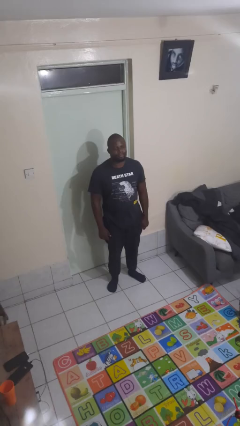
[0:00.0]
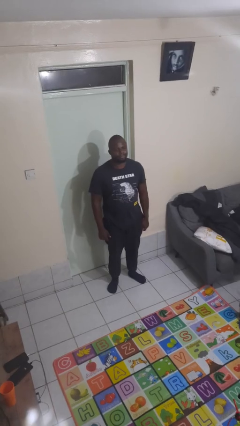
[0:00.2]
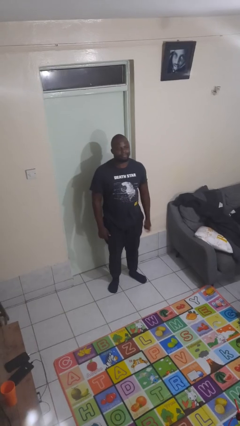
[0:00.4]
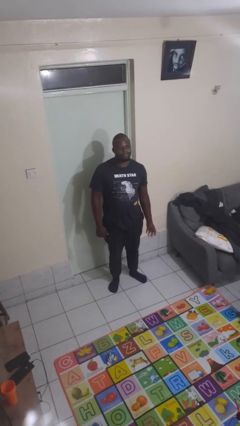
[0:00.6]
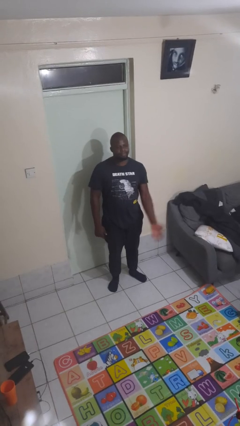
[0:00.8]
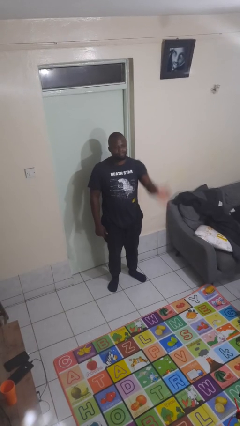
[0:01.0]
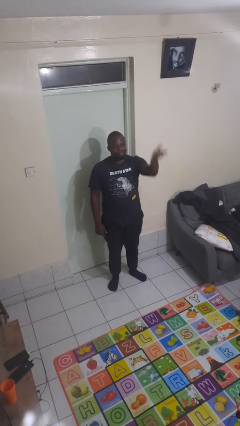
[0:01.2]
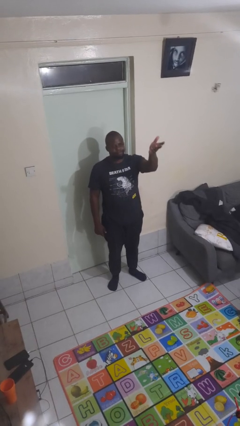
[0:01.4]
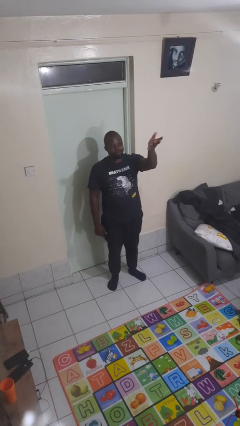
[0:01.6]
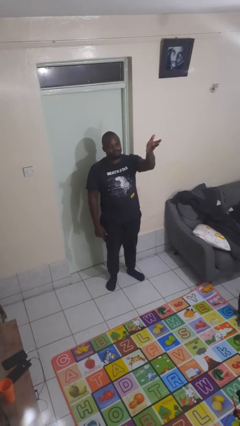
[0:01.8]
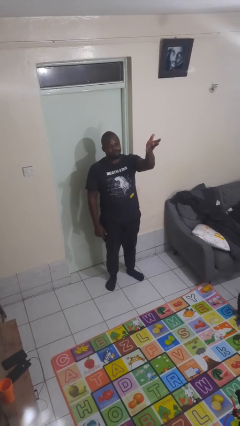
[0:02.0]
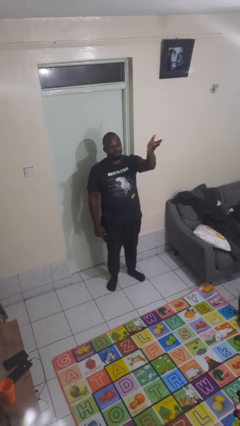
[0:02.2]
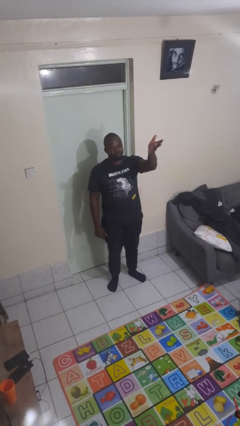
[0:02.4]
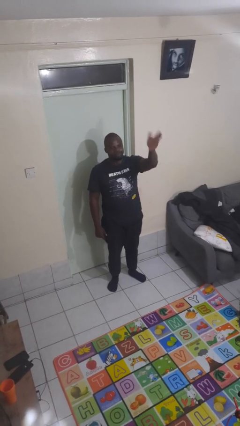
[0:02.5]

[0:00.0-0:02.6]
person gestures swipe up

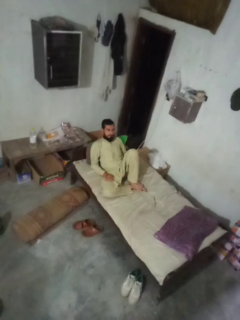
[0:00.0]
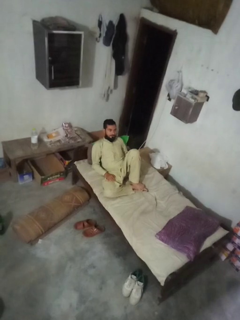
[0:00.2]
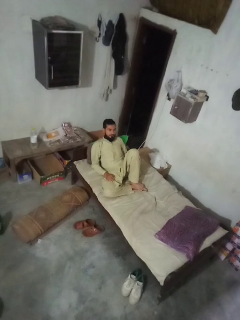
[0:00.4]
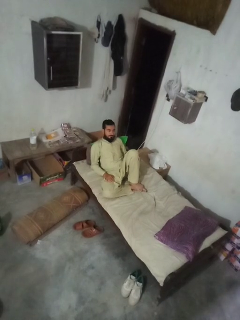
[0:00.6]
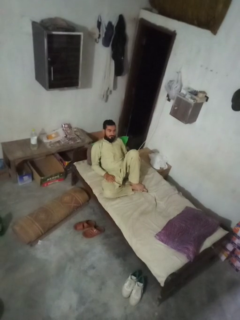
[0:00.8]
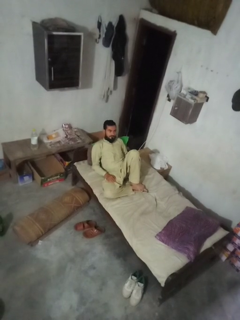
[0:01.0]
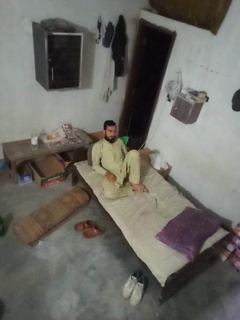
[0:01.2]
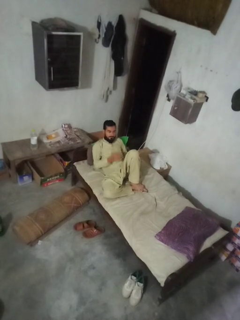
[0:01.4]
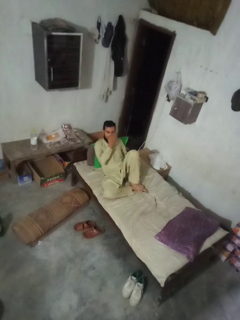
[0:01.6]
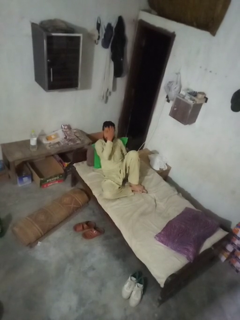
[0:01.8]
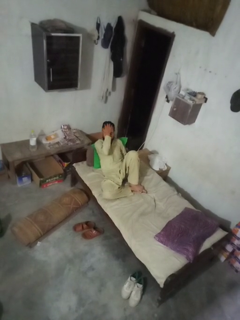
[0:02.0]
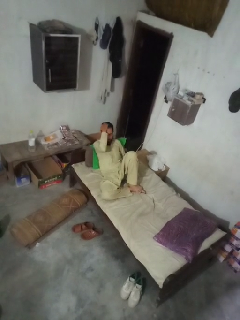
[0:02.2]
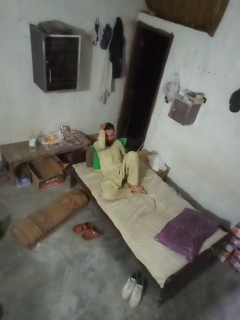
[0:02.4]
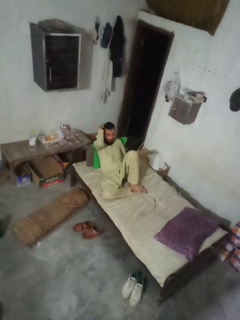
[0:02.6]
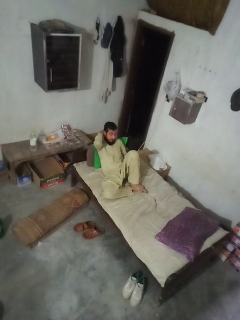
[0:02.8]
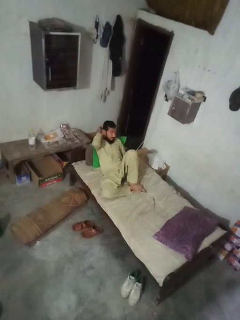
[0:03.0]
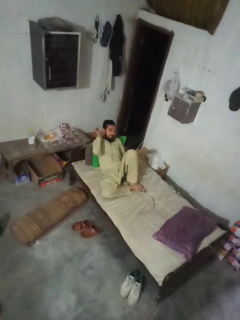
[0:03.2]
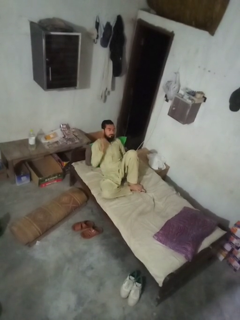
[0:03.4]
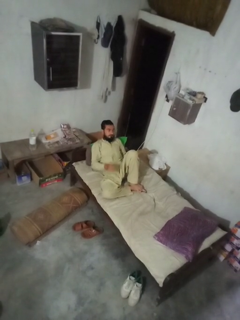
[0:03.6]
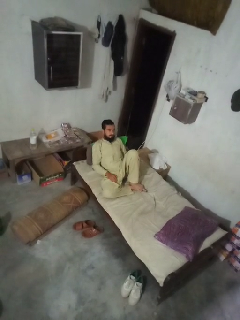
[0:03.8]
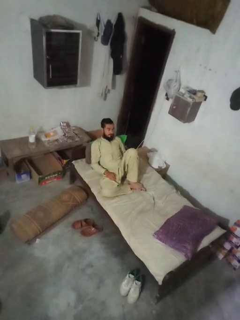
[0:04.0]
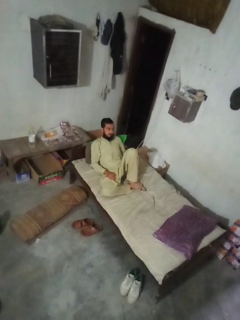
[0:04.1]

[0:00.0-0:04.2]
person strokes hair

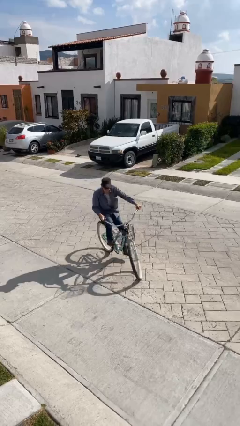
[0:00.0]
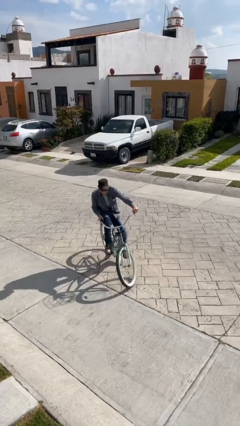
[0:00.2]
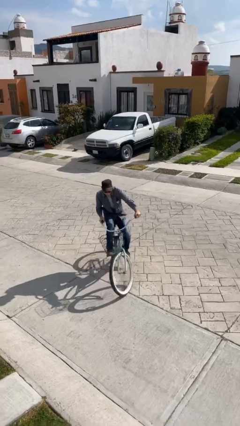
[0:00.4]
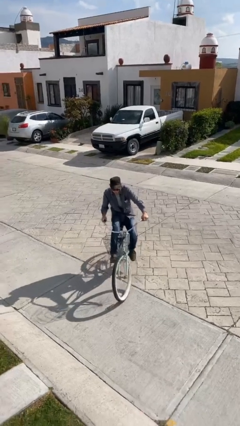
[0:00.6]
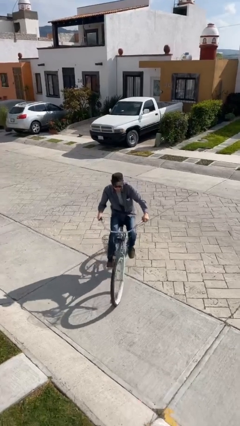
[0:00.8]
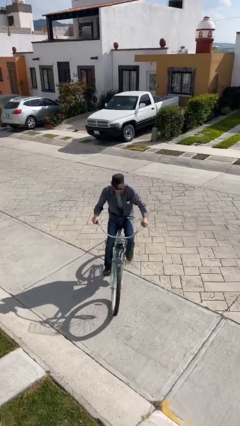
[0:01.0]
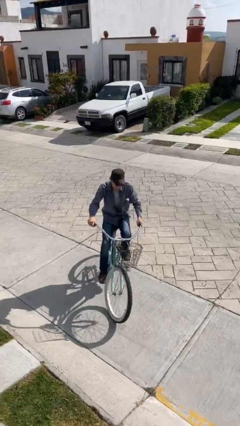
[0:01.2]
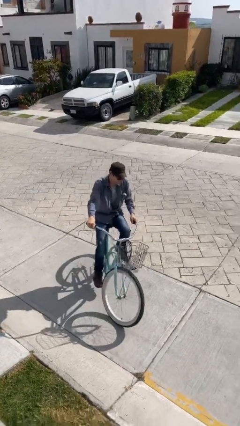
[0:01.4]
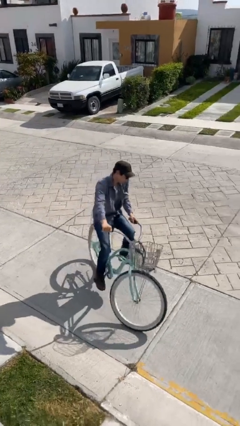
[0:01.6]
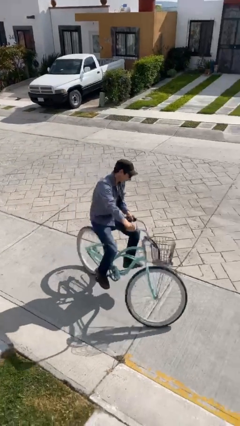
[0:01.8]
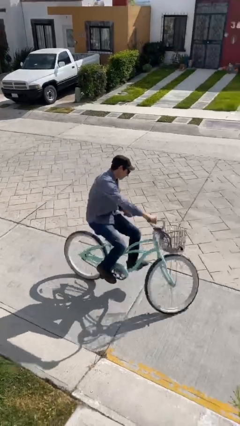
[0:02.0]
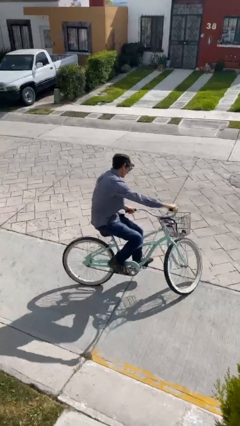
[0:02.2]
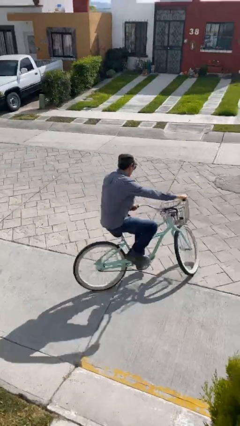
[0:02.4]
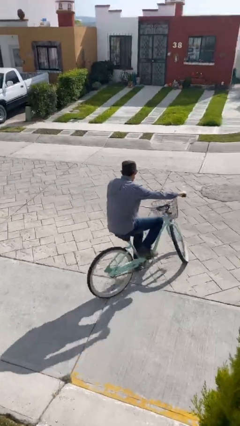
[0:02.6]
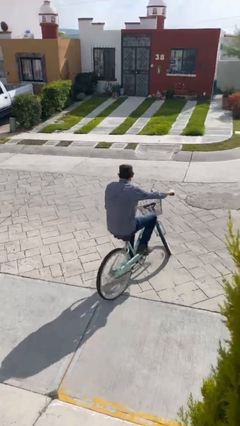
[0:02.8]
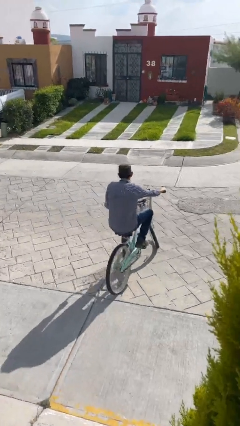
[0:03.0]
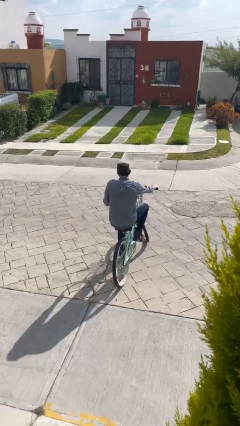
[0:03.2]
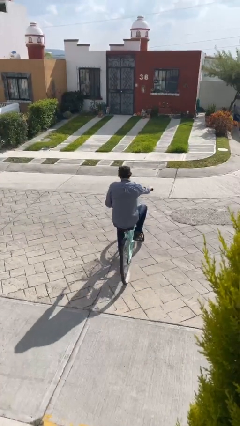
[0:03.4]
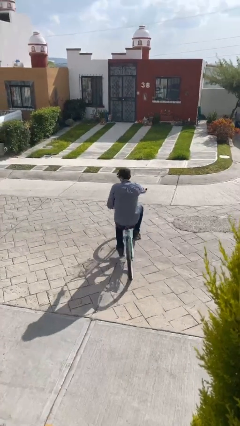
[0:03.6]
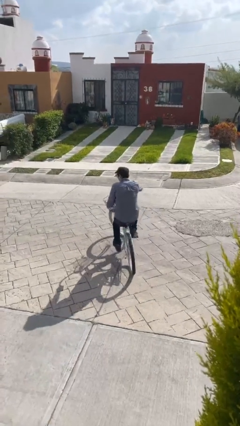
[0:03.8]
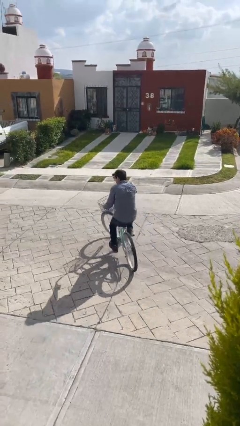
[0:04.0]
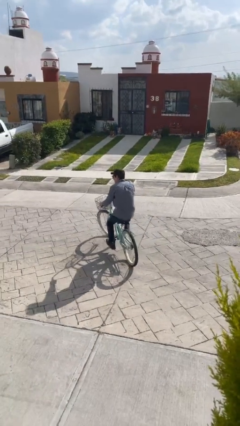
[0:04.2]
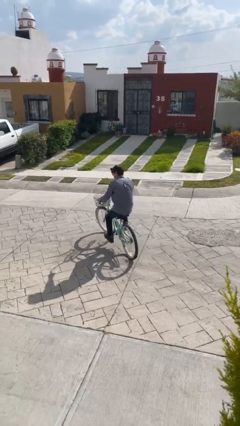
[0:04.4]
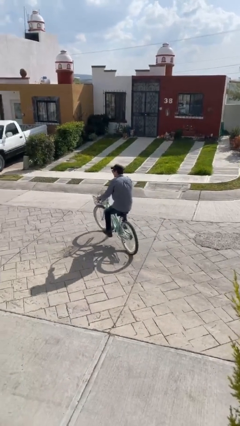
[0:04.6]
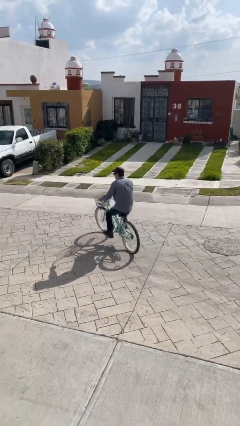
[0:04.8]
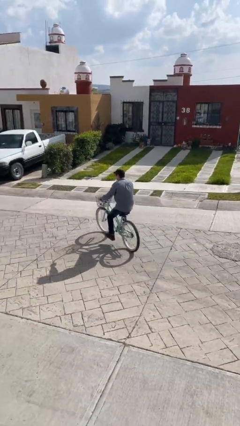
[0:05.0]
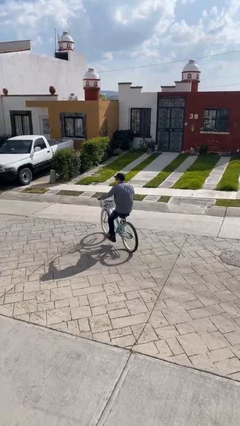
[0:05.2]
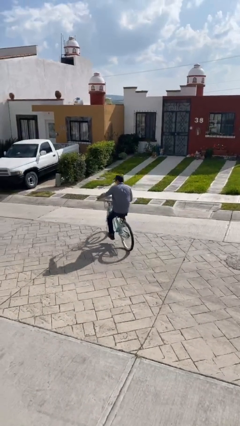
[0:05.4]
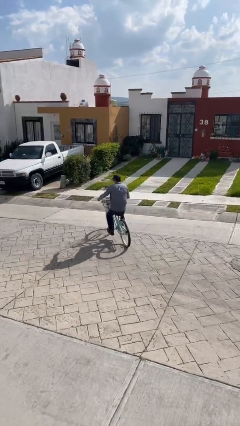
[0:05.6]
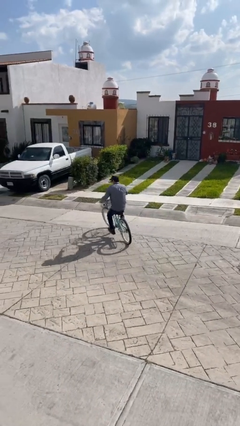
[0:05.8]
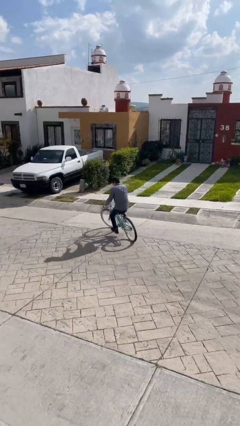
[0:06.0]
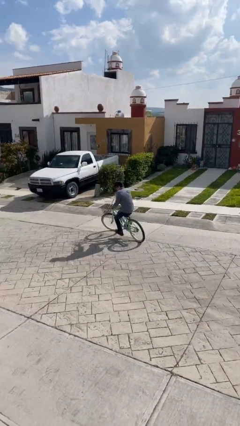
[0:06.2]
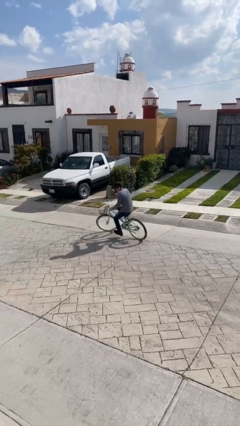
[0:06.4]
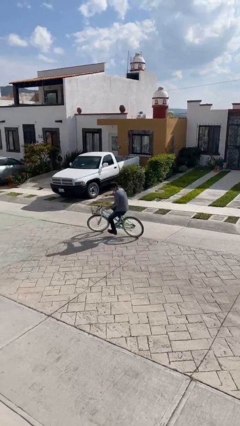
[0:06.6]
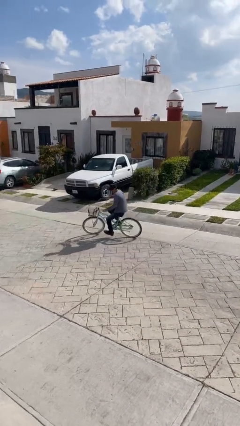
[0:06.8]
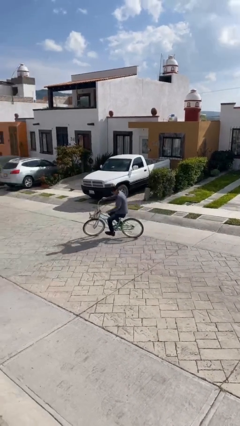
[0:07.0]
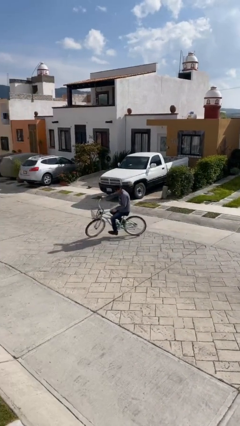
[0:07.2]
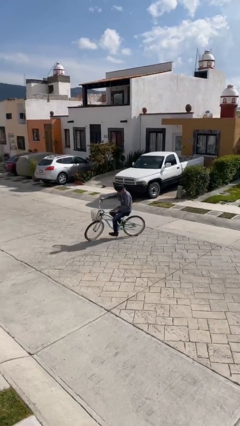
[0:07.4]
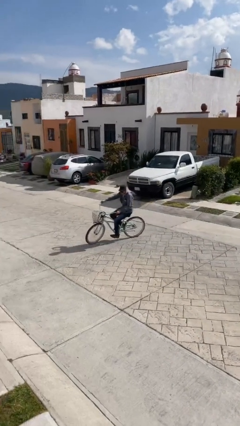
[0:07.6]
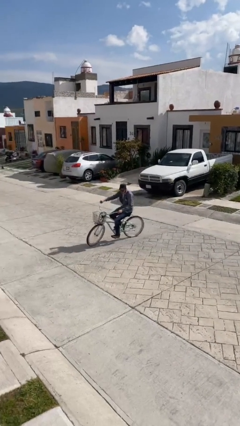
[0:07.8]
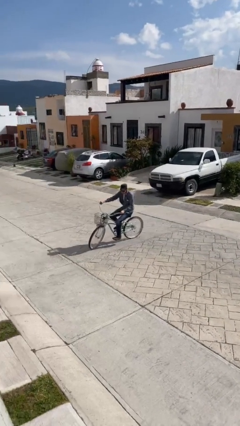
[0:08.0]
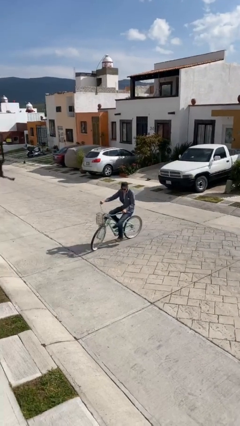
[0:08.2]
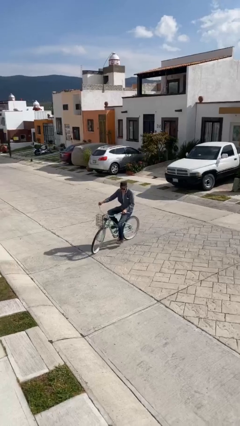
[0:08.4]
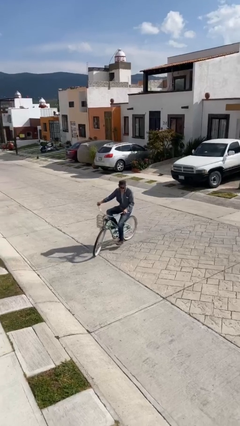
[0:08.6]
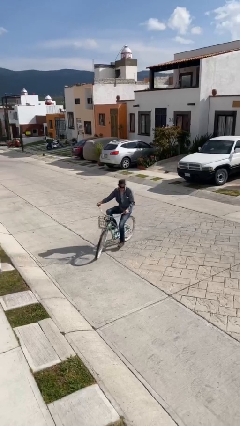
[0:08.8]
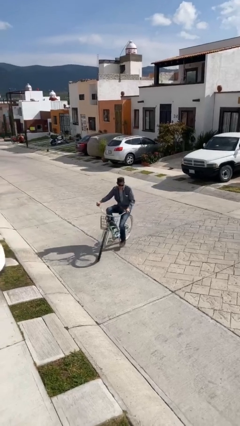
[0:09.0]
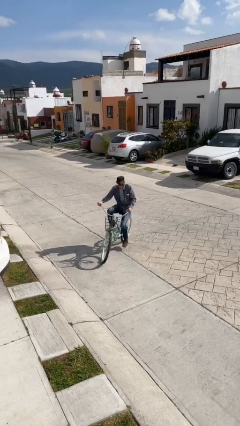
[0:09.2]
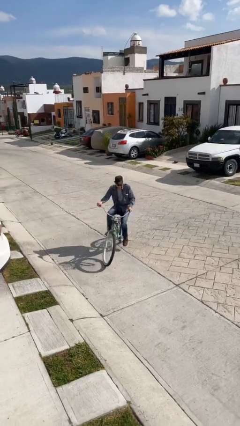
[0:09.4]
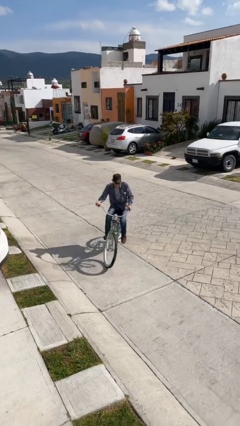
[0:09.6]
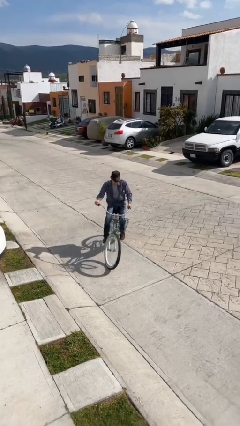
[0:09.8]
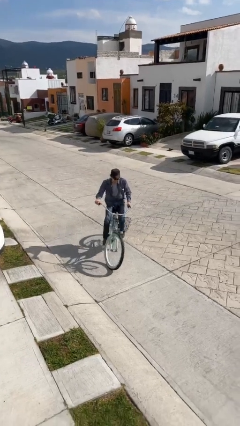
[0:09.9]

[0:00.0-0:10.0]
person rides bicycle

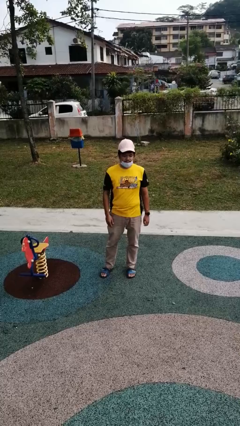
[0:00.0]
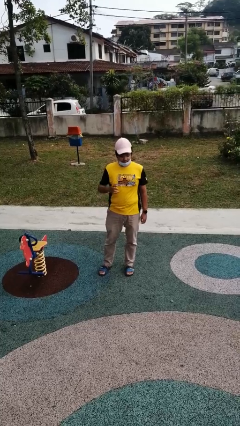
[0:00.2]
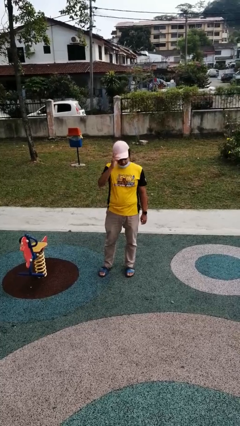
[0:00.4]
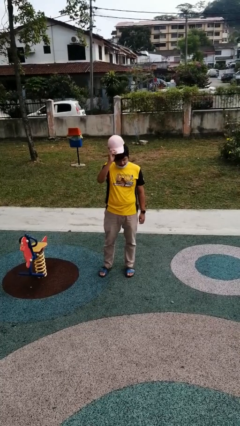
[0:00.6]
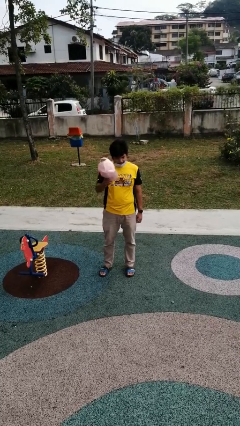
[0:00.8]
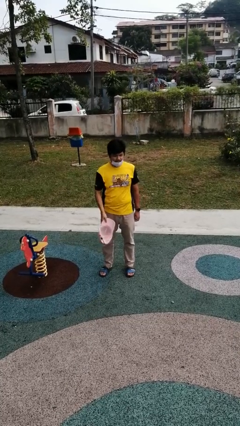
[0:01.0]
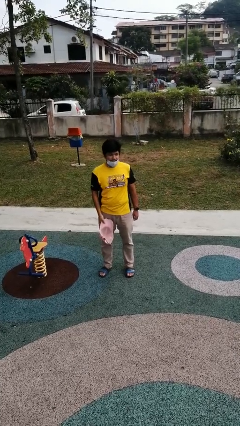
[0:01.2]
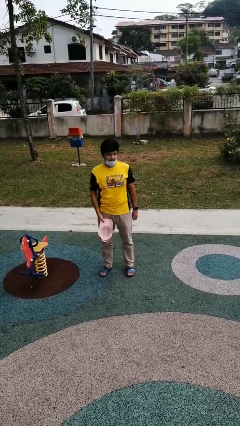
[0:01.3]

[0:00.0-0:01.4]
person takes off hat

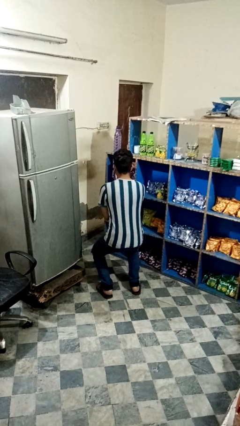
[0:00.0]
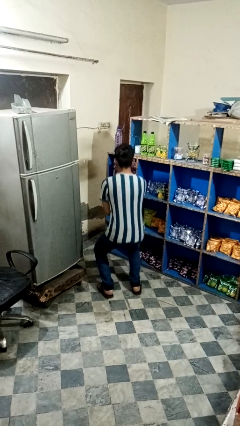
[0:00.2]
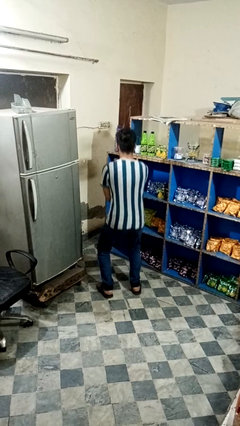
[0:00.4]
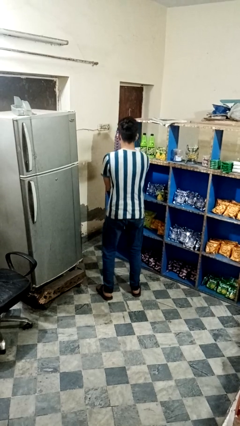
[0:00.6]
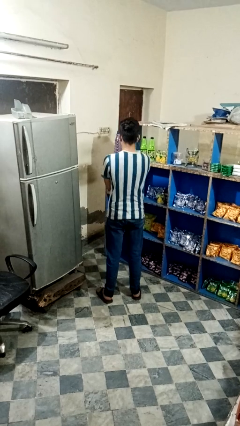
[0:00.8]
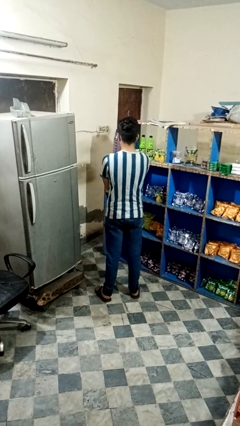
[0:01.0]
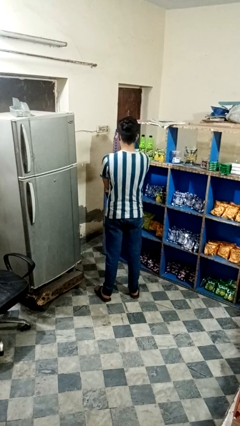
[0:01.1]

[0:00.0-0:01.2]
person stands up
